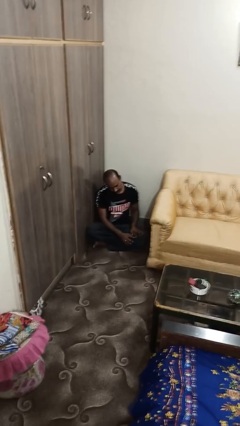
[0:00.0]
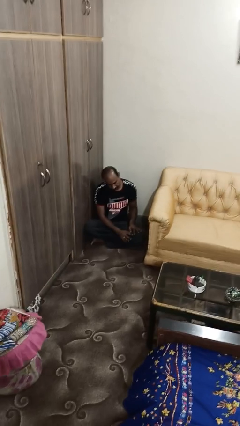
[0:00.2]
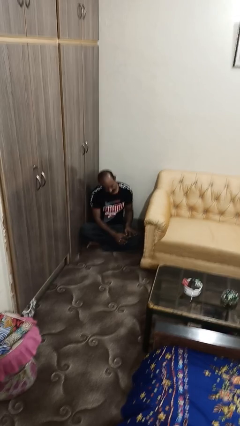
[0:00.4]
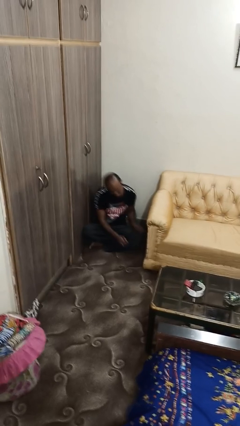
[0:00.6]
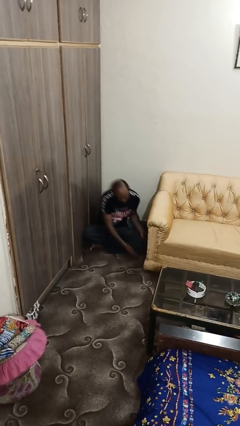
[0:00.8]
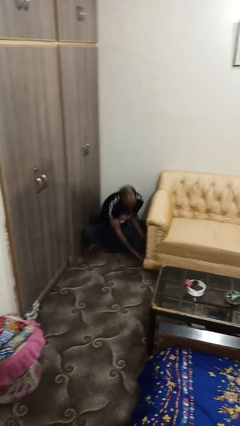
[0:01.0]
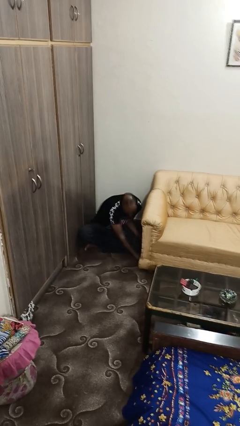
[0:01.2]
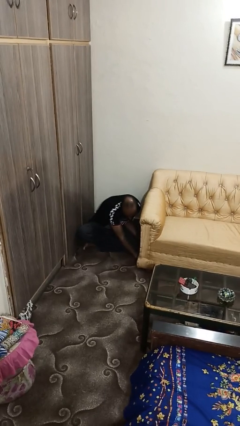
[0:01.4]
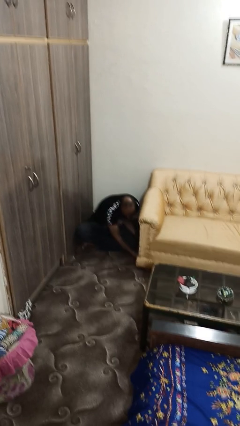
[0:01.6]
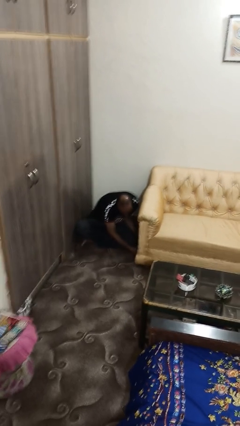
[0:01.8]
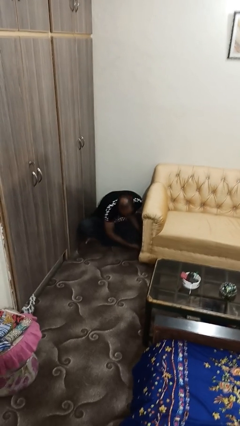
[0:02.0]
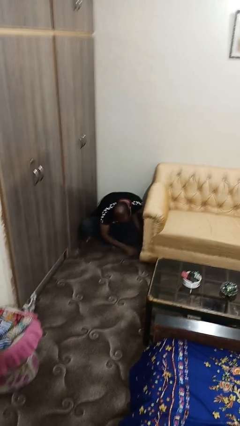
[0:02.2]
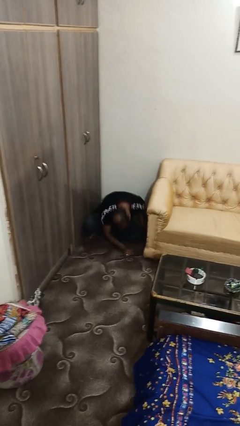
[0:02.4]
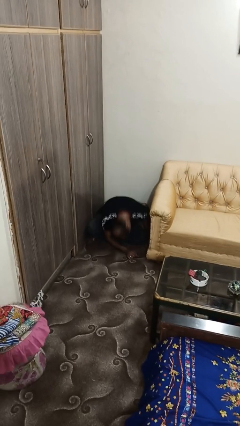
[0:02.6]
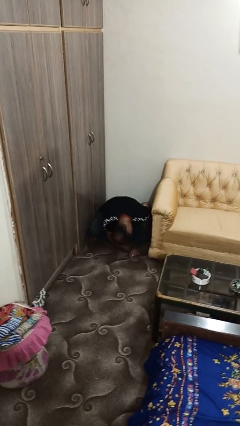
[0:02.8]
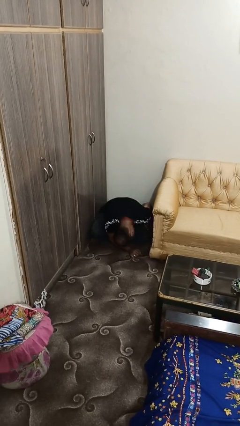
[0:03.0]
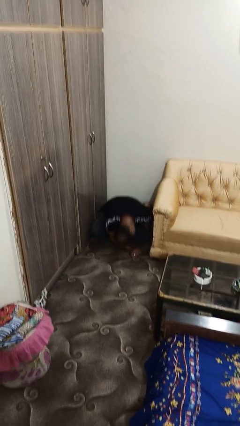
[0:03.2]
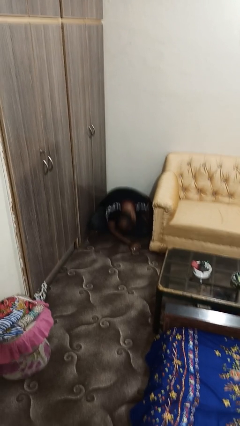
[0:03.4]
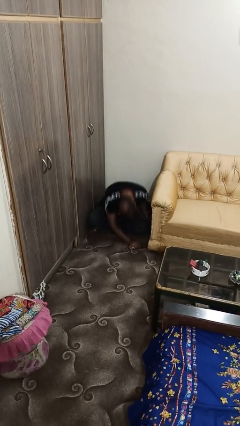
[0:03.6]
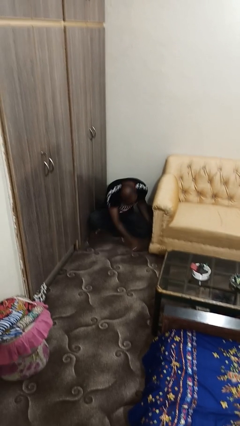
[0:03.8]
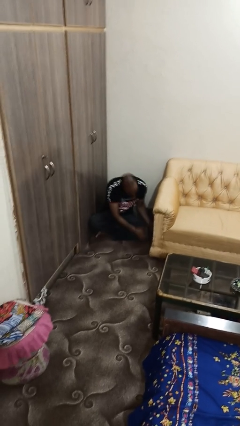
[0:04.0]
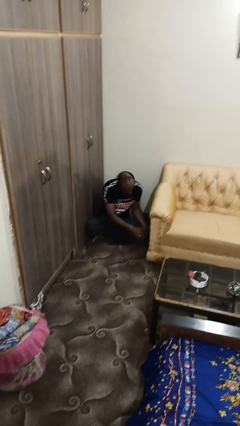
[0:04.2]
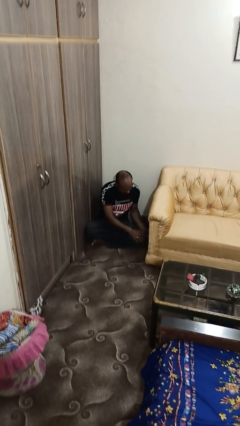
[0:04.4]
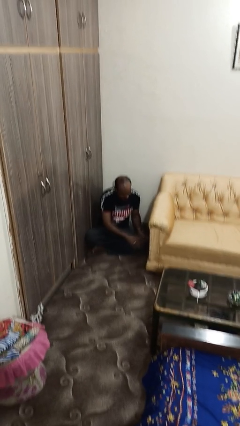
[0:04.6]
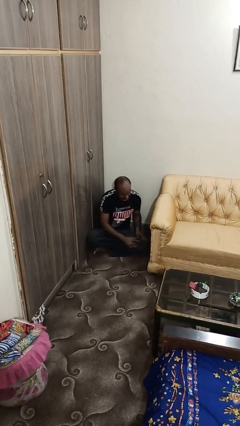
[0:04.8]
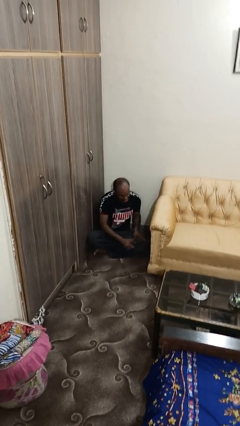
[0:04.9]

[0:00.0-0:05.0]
person searches under couch

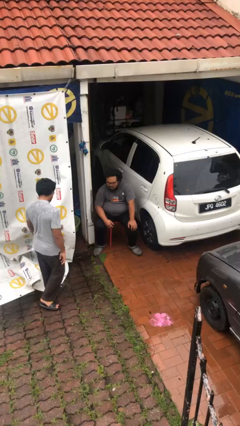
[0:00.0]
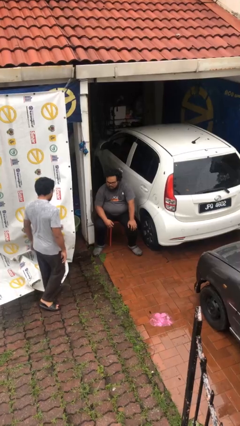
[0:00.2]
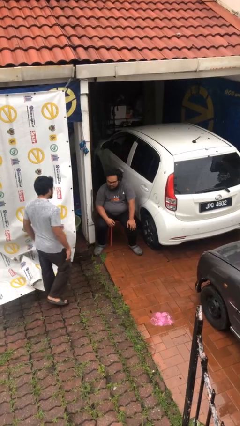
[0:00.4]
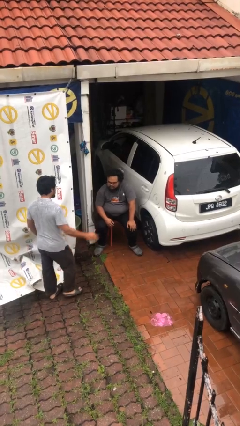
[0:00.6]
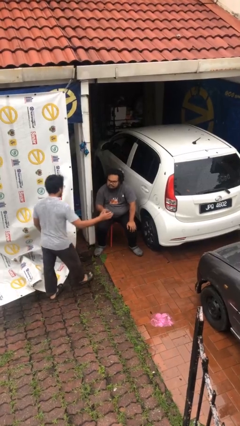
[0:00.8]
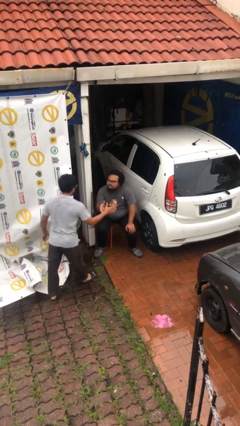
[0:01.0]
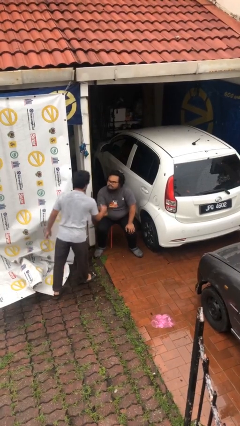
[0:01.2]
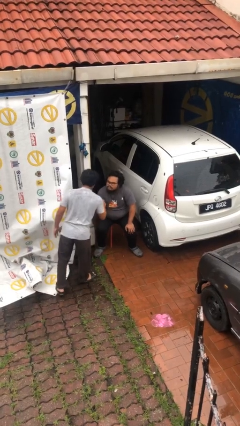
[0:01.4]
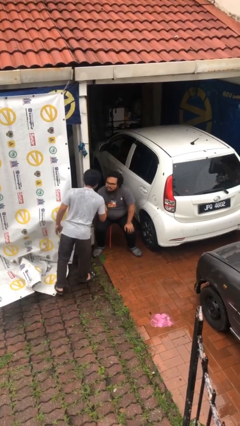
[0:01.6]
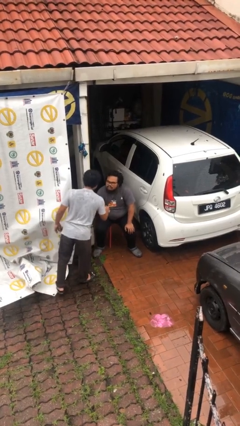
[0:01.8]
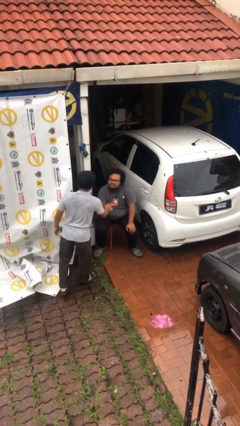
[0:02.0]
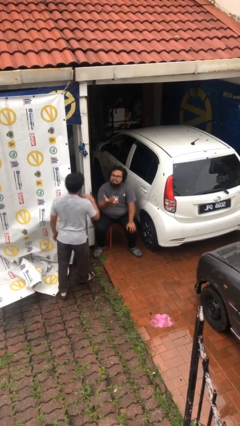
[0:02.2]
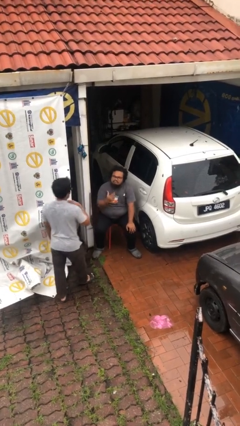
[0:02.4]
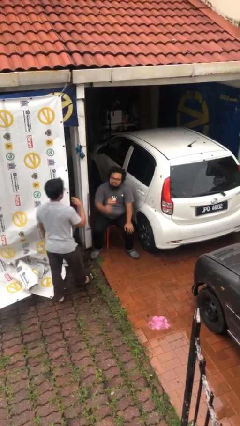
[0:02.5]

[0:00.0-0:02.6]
person shakes hand

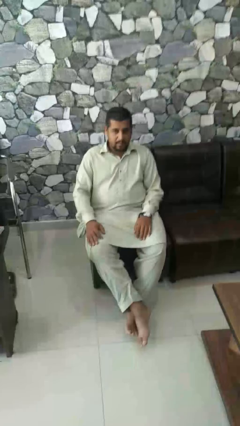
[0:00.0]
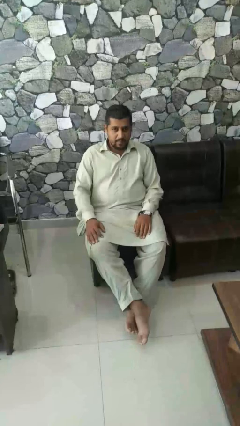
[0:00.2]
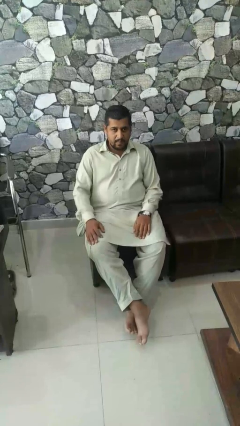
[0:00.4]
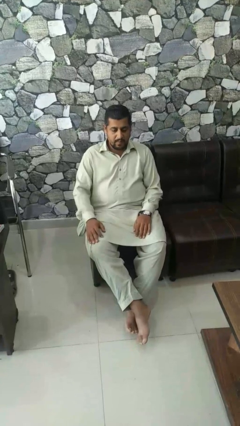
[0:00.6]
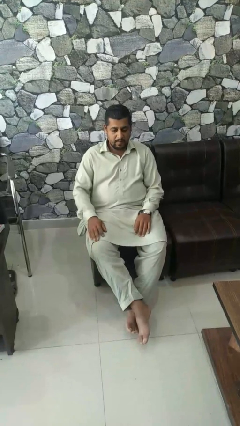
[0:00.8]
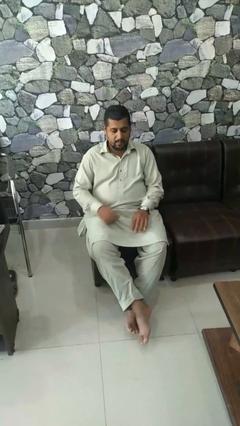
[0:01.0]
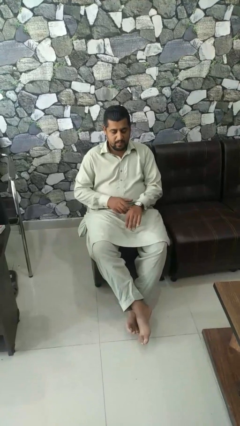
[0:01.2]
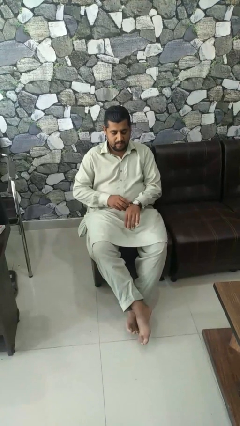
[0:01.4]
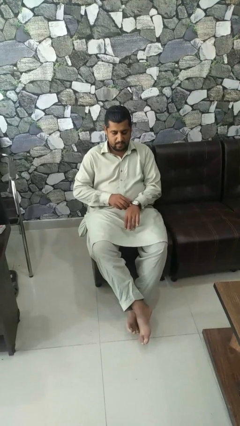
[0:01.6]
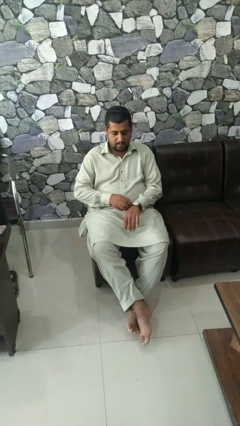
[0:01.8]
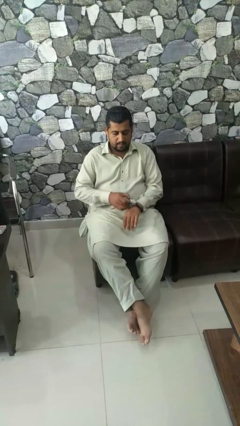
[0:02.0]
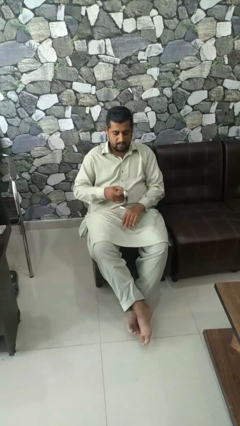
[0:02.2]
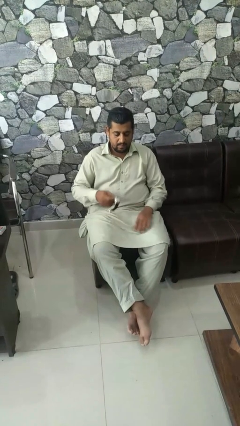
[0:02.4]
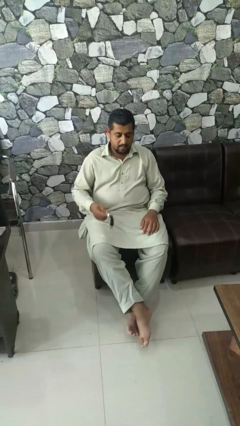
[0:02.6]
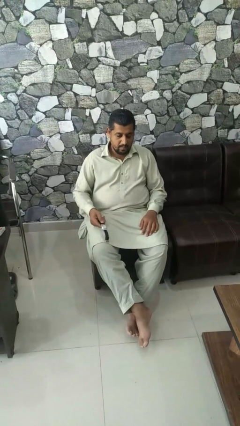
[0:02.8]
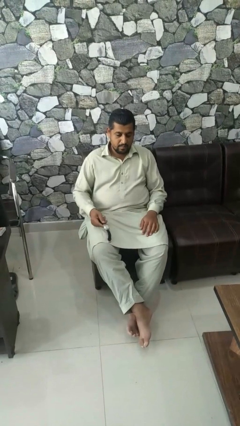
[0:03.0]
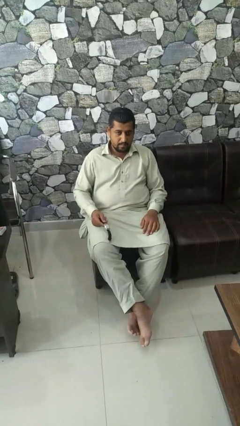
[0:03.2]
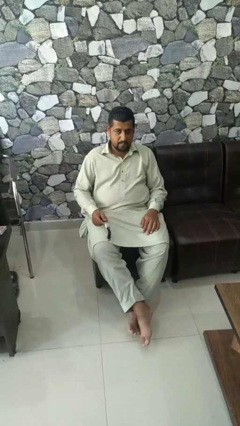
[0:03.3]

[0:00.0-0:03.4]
person takes off wristwatch

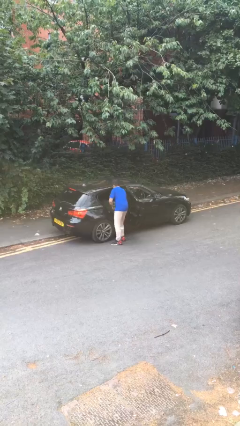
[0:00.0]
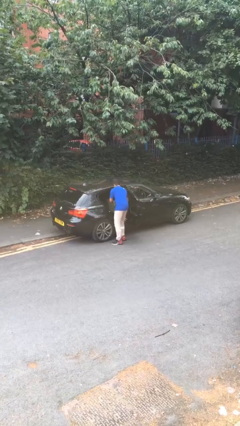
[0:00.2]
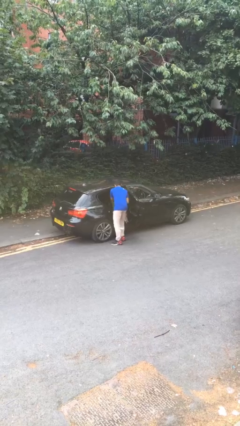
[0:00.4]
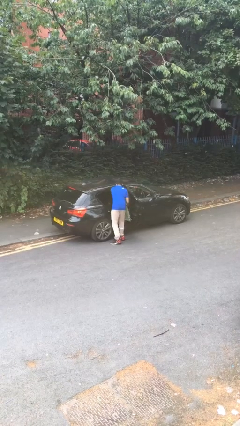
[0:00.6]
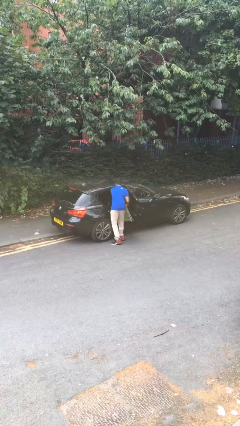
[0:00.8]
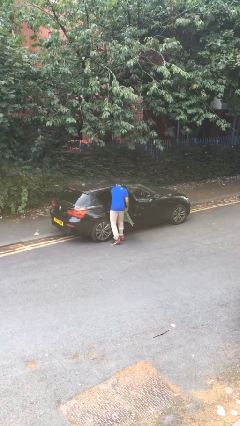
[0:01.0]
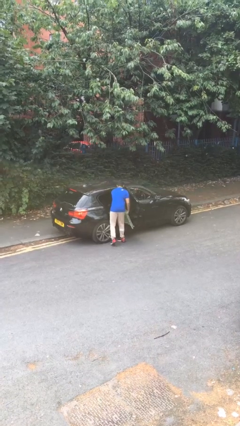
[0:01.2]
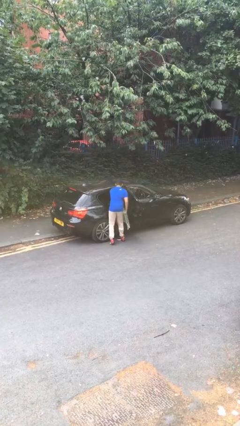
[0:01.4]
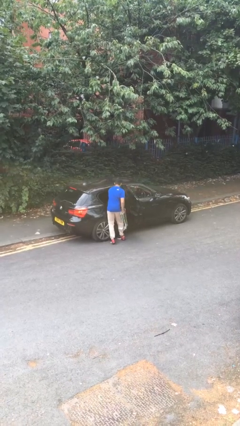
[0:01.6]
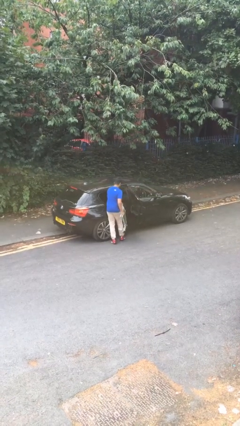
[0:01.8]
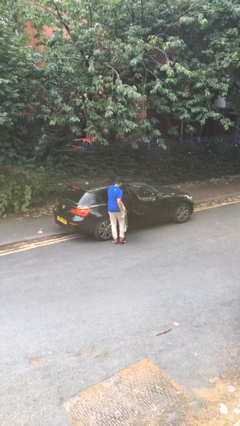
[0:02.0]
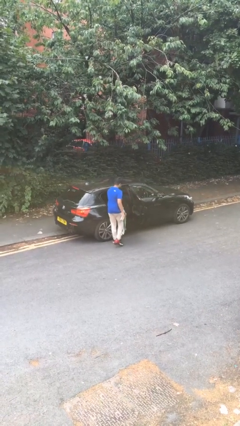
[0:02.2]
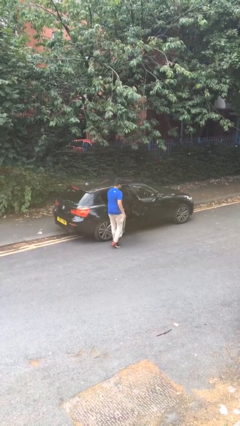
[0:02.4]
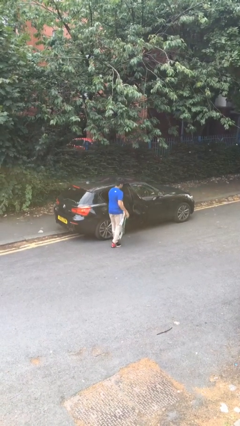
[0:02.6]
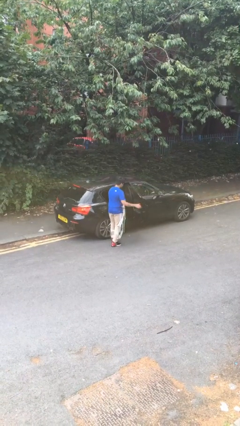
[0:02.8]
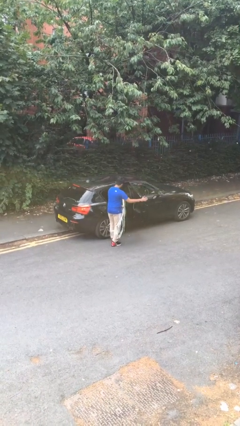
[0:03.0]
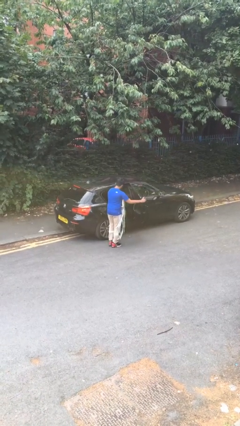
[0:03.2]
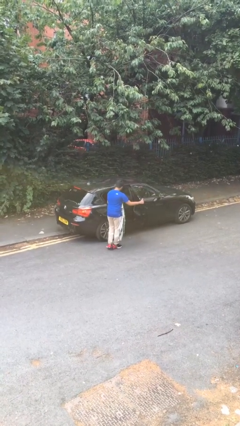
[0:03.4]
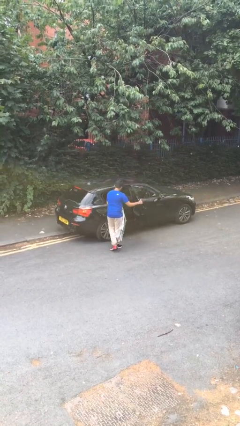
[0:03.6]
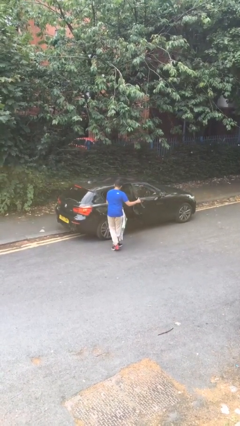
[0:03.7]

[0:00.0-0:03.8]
person unloads car

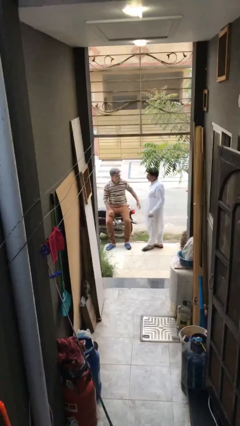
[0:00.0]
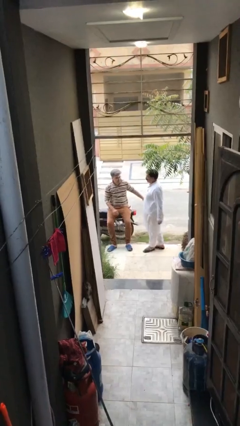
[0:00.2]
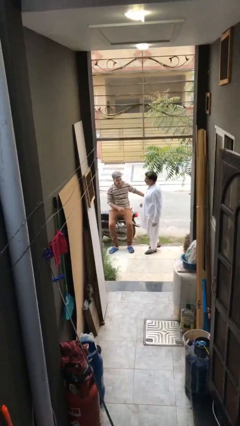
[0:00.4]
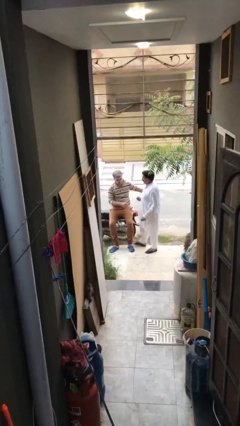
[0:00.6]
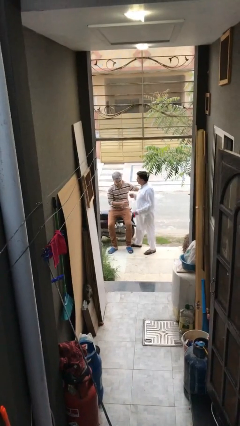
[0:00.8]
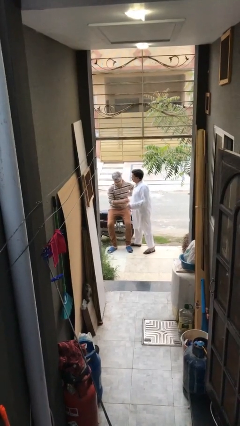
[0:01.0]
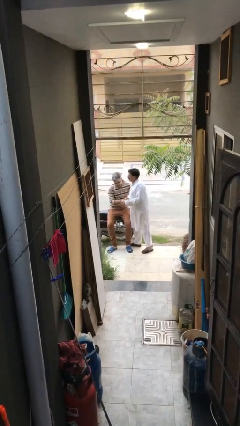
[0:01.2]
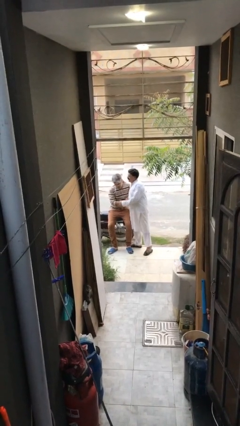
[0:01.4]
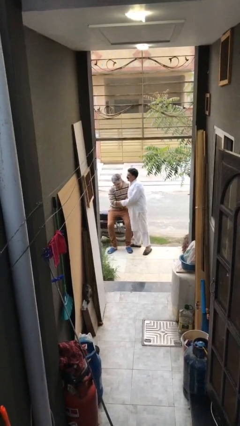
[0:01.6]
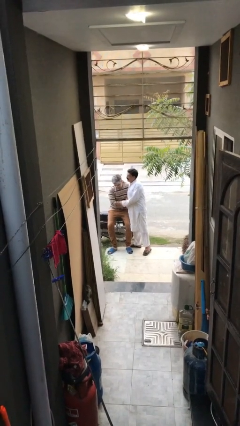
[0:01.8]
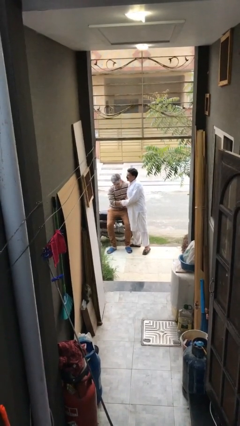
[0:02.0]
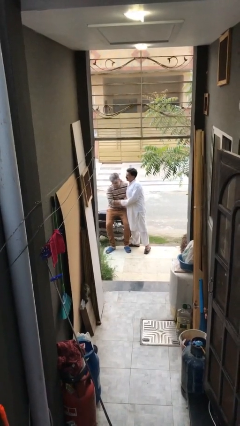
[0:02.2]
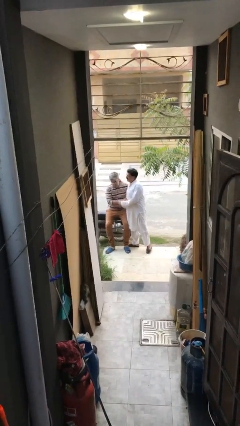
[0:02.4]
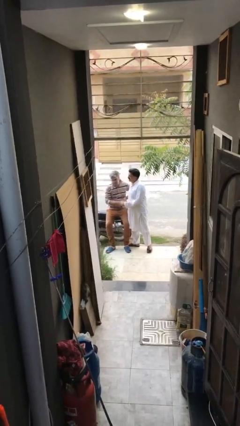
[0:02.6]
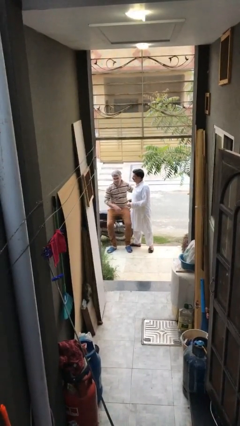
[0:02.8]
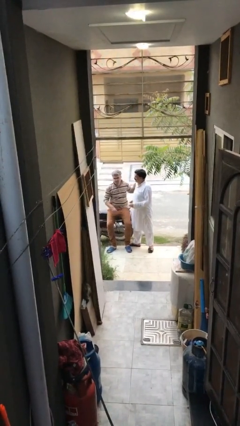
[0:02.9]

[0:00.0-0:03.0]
person embraces person
